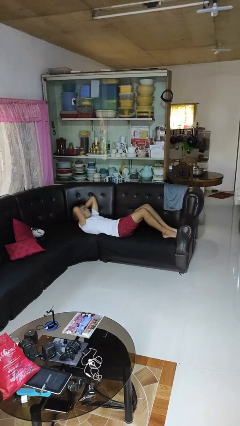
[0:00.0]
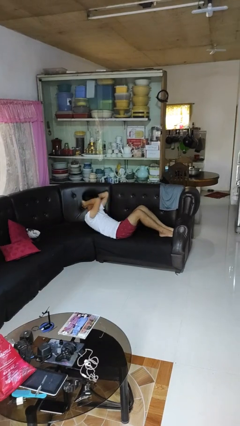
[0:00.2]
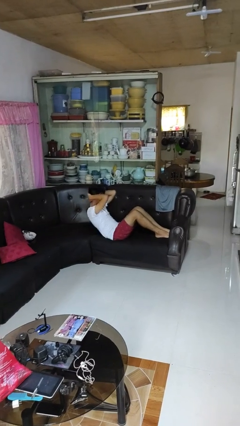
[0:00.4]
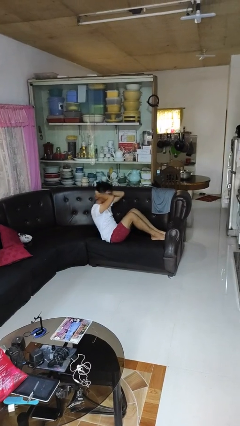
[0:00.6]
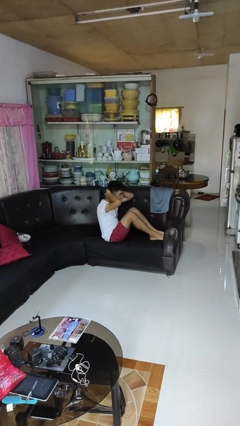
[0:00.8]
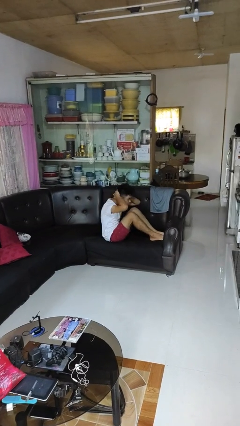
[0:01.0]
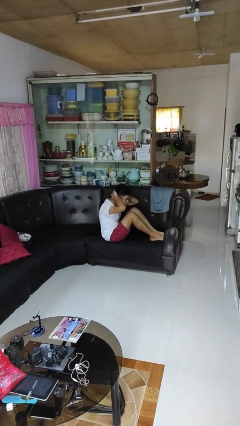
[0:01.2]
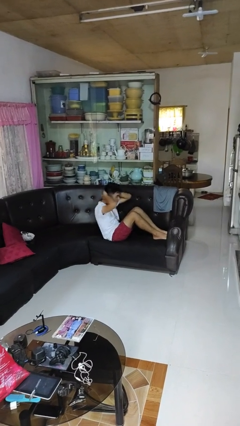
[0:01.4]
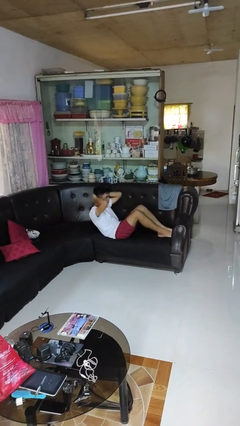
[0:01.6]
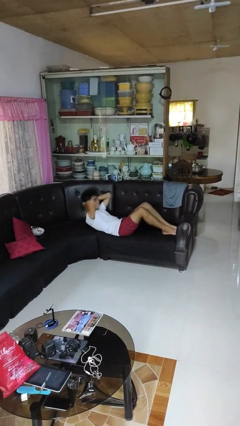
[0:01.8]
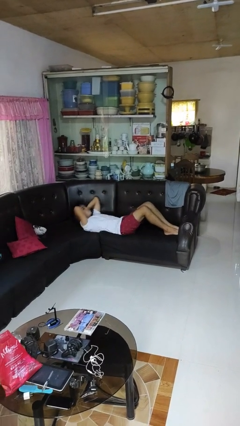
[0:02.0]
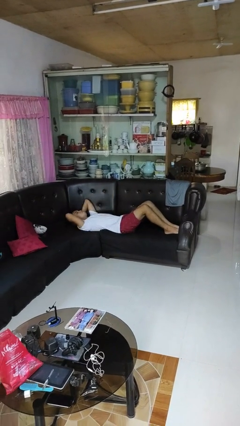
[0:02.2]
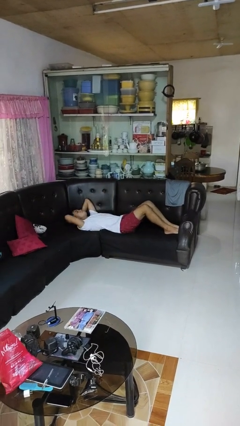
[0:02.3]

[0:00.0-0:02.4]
person exercises with situp

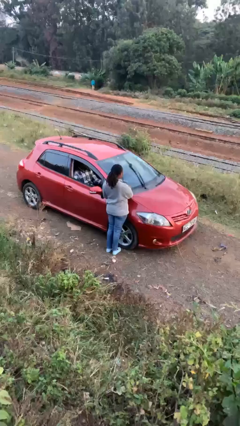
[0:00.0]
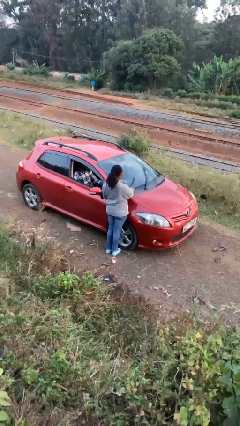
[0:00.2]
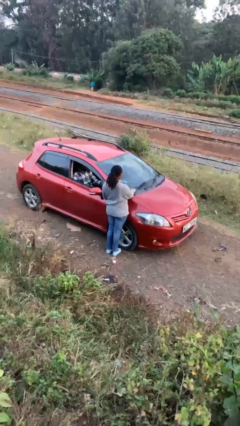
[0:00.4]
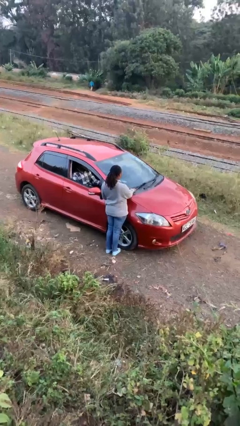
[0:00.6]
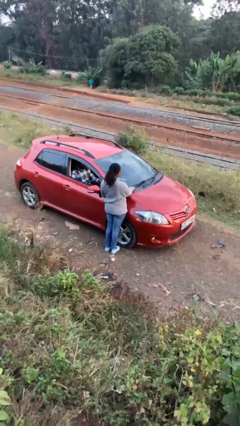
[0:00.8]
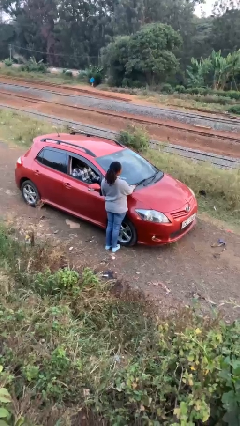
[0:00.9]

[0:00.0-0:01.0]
person flips down car wipers

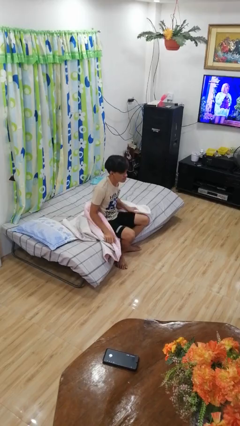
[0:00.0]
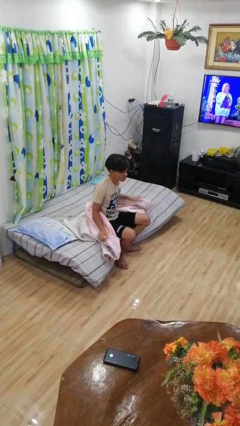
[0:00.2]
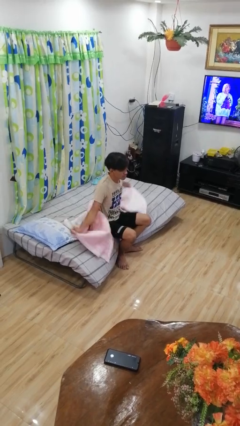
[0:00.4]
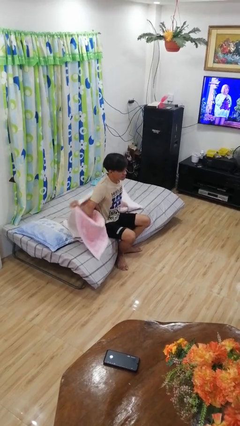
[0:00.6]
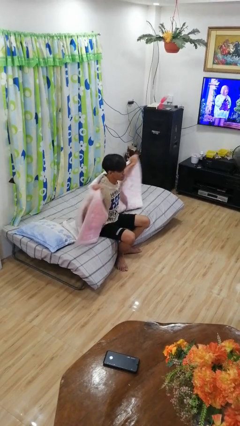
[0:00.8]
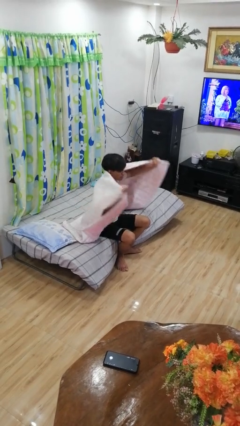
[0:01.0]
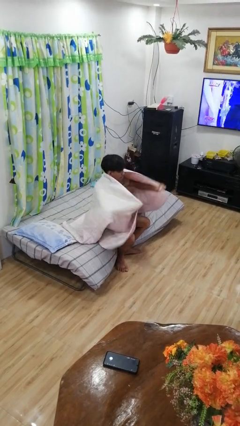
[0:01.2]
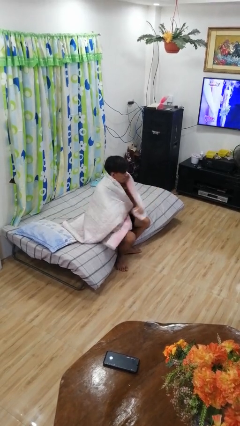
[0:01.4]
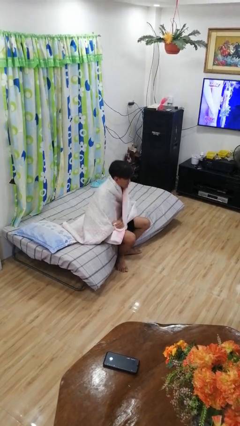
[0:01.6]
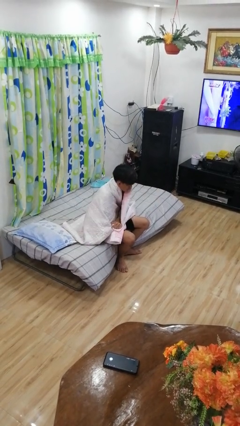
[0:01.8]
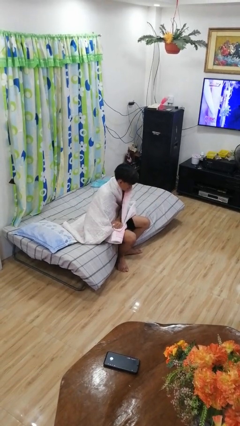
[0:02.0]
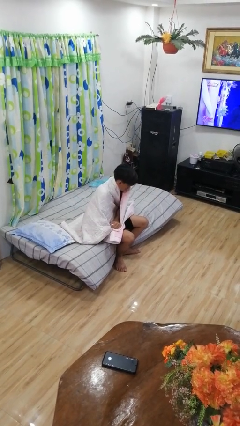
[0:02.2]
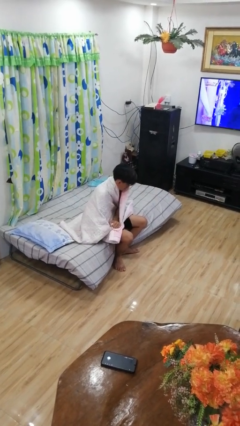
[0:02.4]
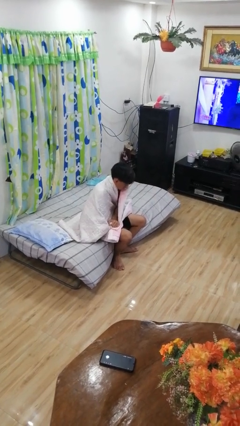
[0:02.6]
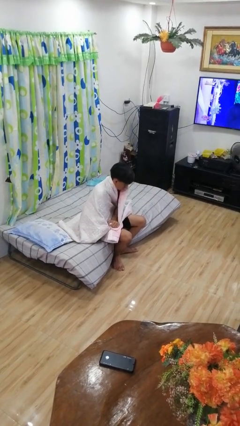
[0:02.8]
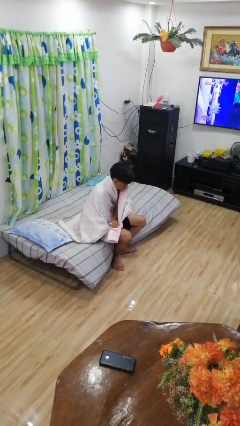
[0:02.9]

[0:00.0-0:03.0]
person covers with bedsheets

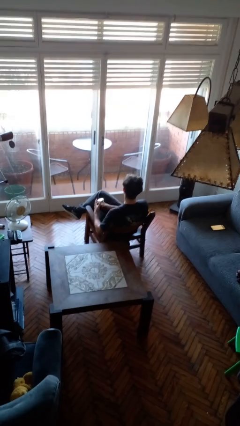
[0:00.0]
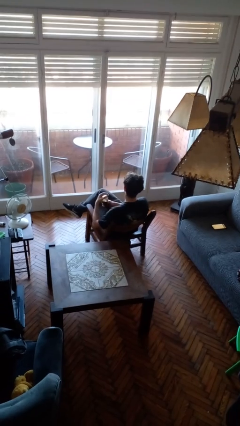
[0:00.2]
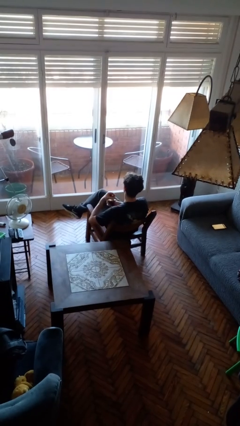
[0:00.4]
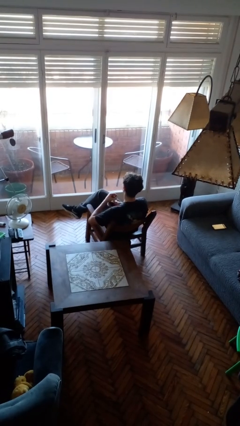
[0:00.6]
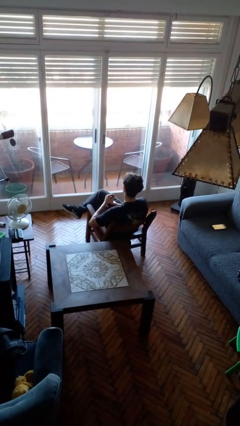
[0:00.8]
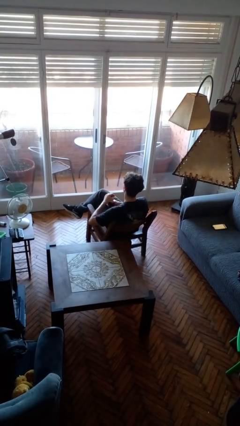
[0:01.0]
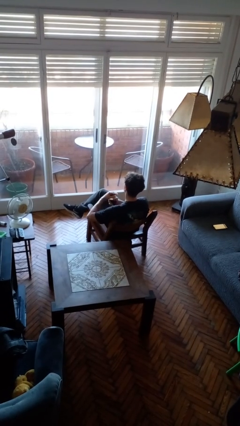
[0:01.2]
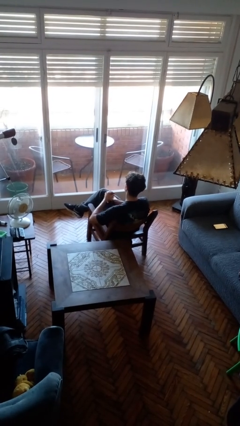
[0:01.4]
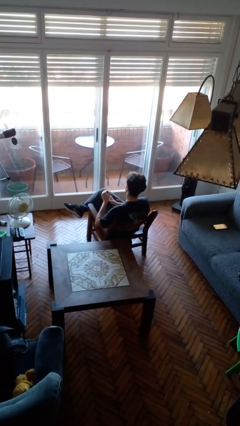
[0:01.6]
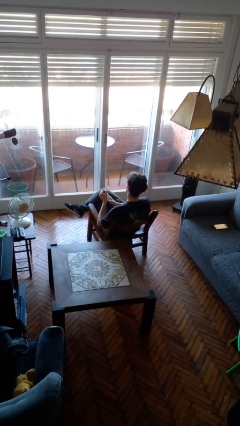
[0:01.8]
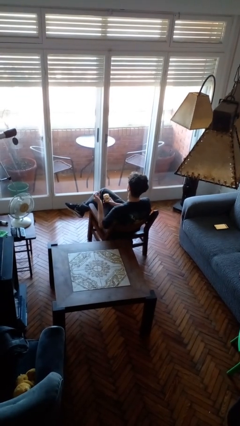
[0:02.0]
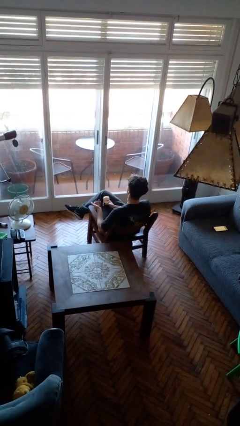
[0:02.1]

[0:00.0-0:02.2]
person opens jar

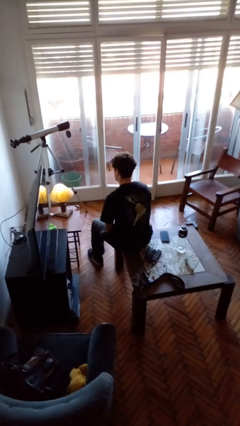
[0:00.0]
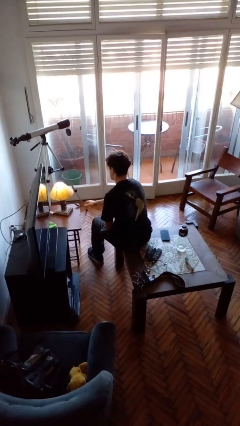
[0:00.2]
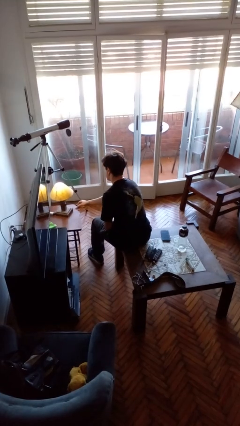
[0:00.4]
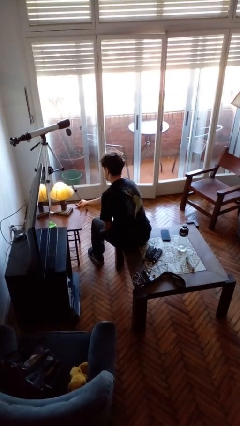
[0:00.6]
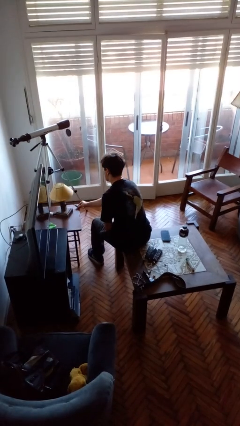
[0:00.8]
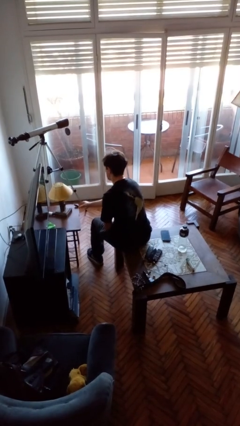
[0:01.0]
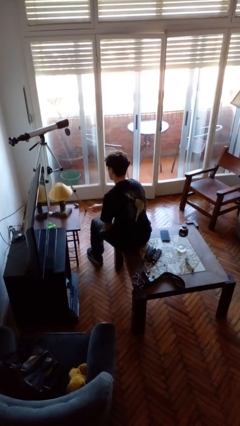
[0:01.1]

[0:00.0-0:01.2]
person turns off lamp

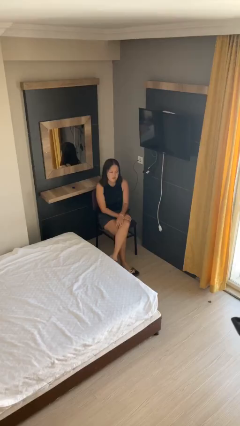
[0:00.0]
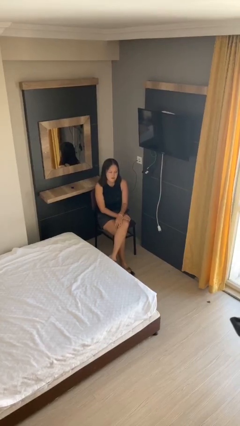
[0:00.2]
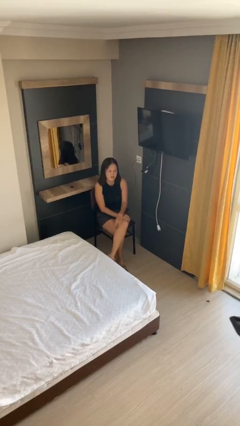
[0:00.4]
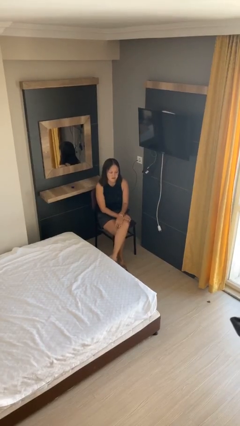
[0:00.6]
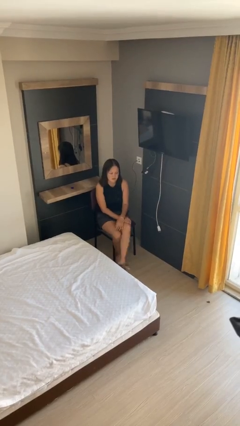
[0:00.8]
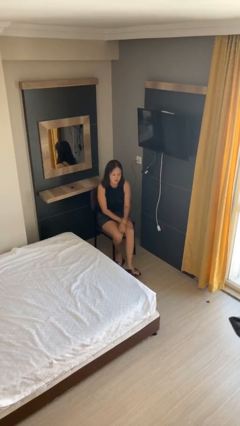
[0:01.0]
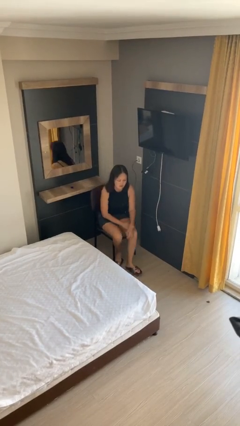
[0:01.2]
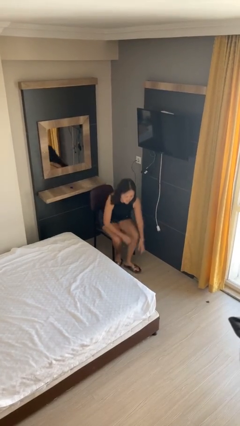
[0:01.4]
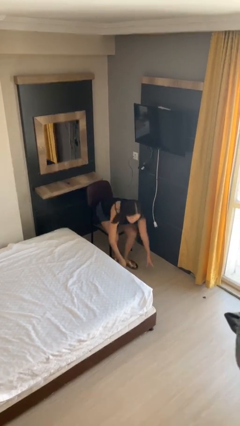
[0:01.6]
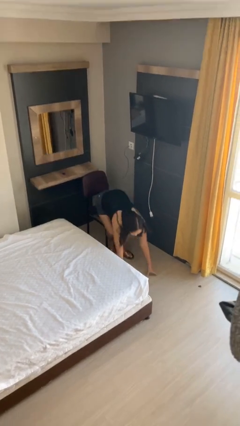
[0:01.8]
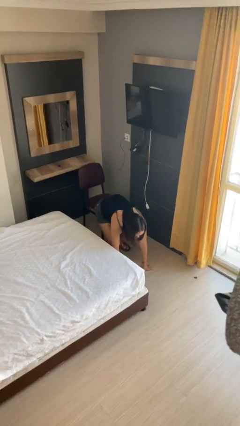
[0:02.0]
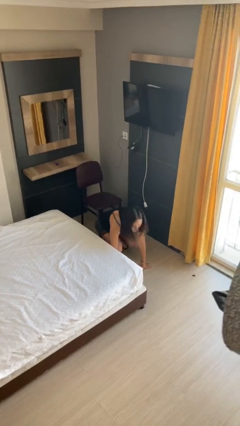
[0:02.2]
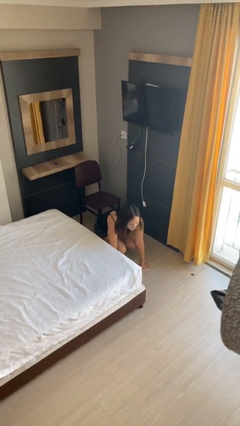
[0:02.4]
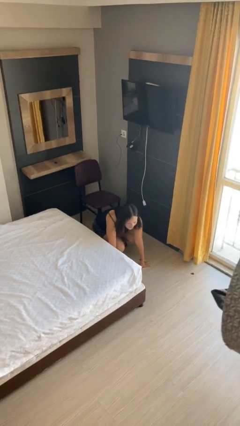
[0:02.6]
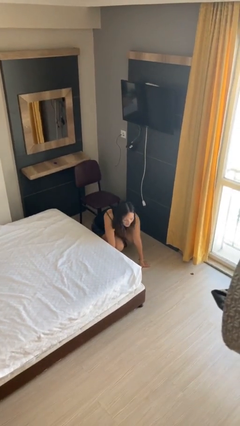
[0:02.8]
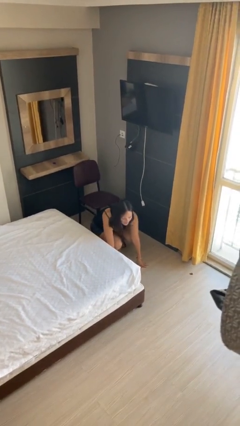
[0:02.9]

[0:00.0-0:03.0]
person falls from chair

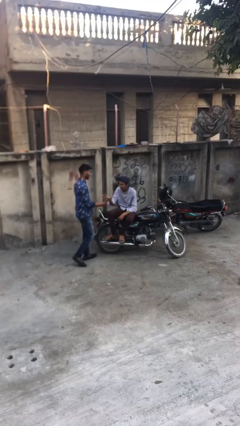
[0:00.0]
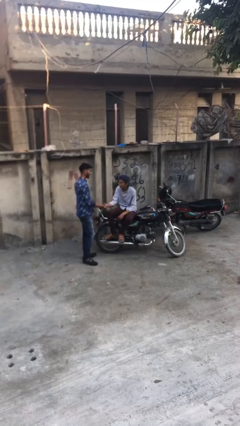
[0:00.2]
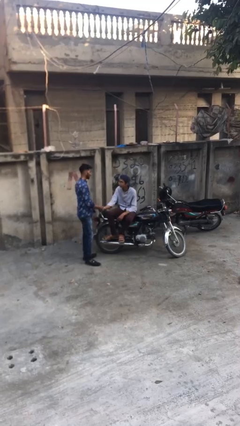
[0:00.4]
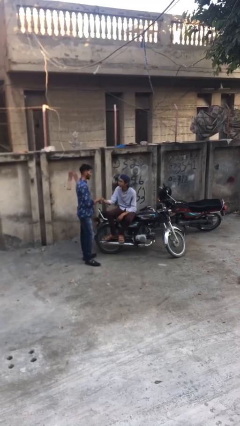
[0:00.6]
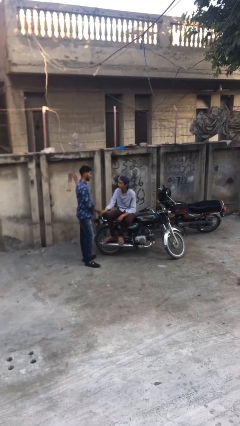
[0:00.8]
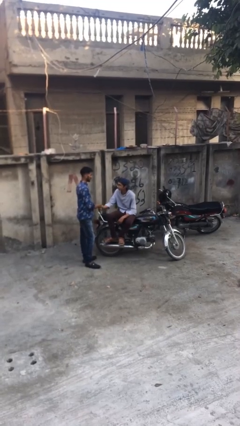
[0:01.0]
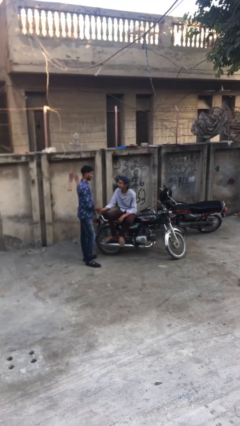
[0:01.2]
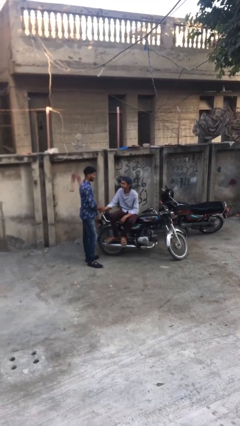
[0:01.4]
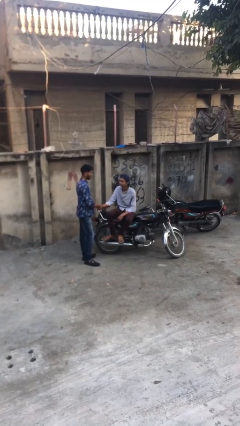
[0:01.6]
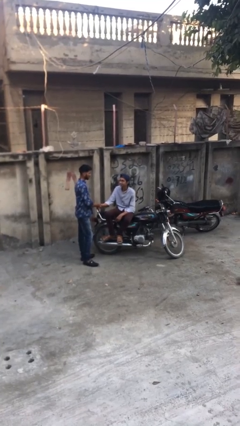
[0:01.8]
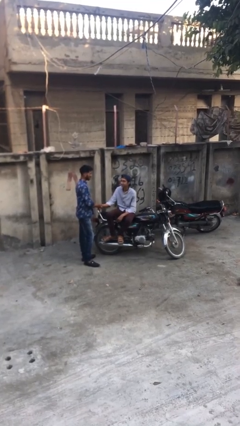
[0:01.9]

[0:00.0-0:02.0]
person shakes hand

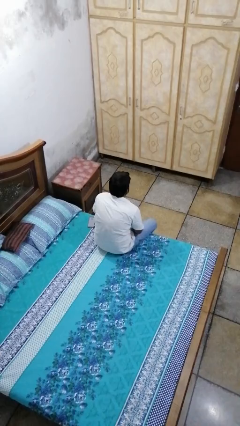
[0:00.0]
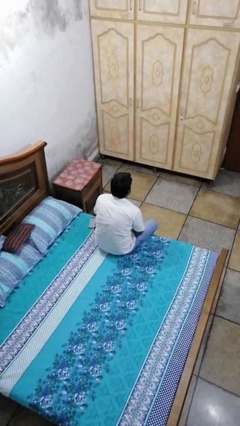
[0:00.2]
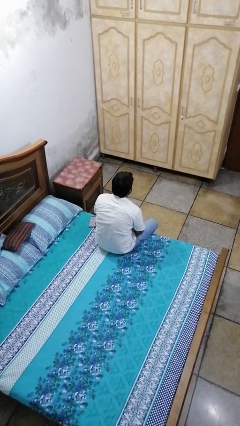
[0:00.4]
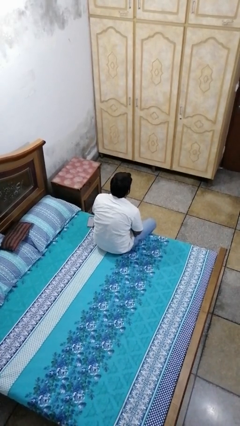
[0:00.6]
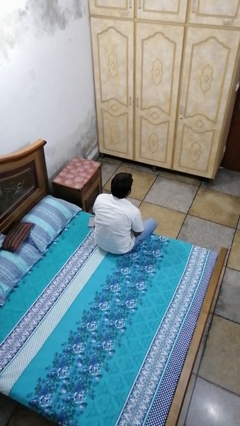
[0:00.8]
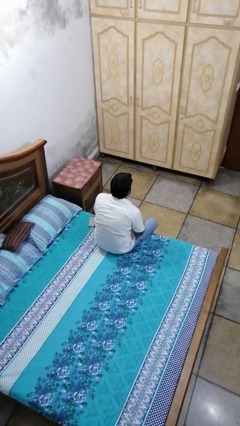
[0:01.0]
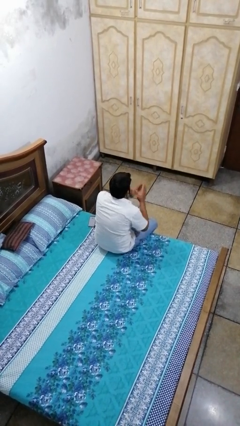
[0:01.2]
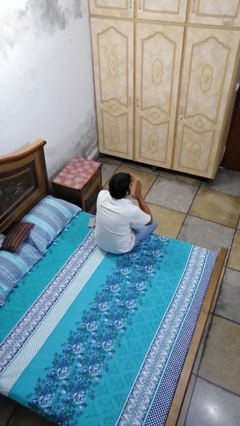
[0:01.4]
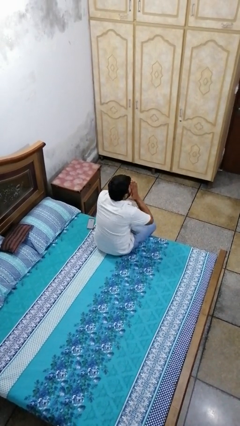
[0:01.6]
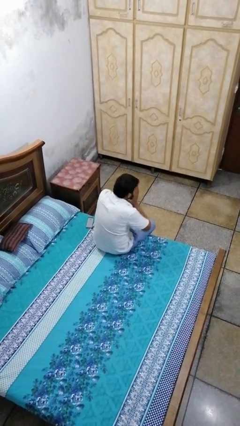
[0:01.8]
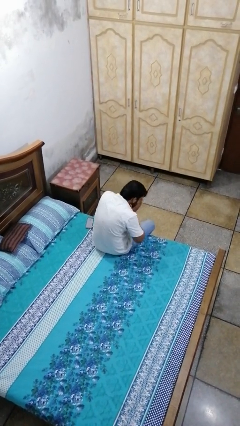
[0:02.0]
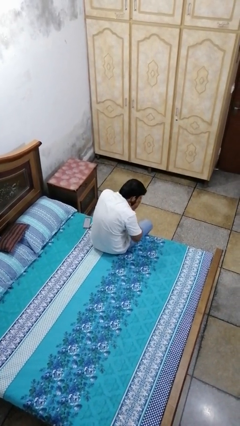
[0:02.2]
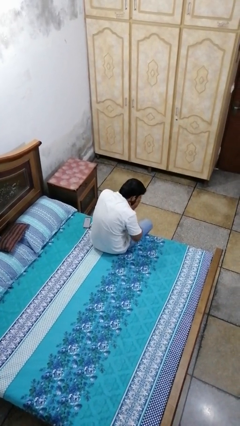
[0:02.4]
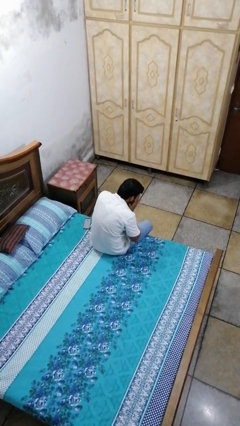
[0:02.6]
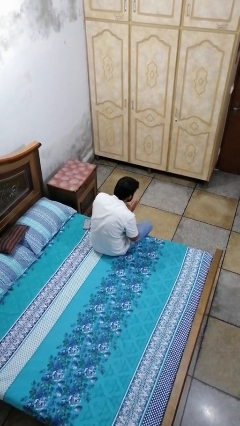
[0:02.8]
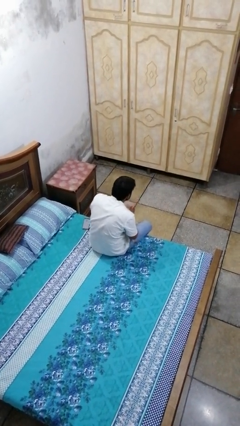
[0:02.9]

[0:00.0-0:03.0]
person sneezes into hand
